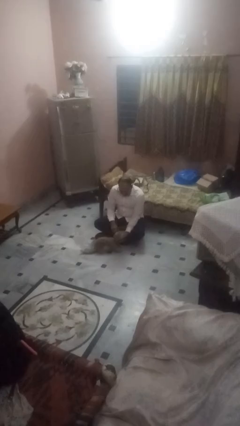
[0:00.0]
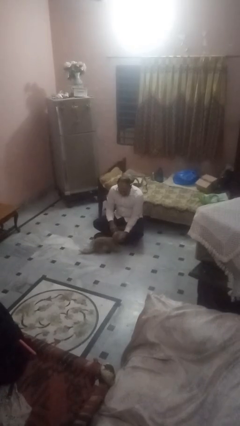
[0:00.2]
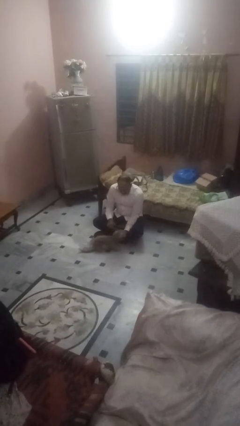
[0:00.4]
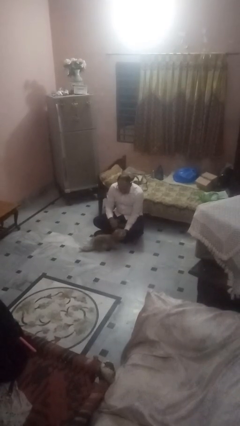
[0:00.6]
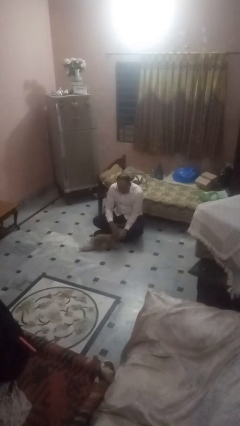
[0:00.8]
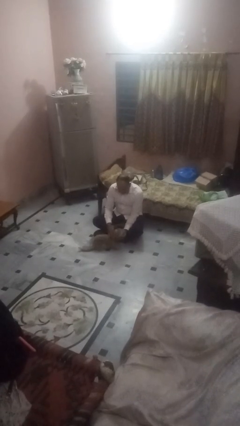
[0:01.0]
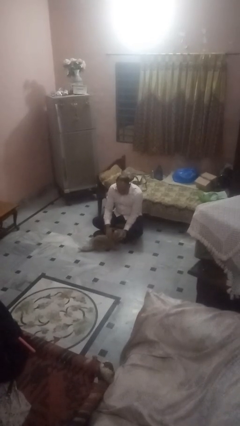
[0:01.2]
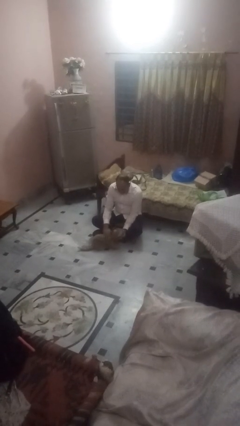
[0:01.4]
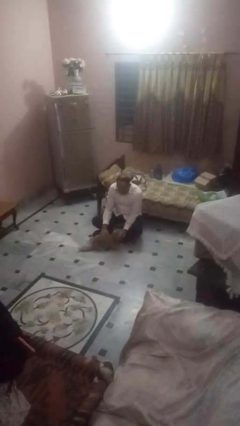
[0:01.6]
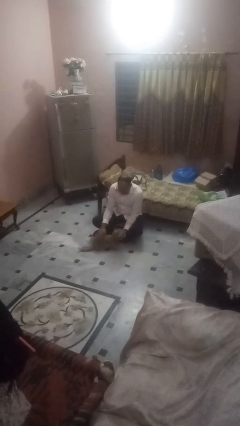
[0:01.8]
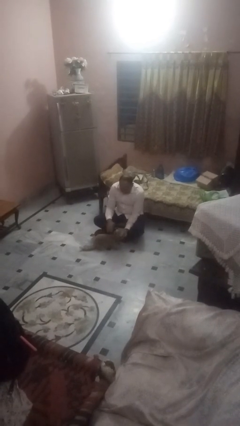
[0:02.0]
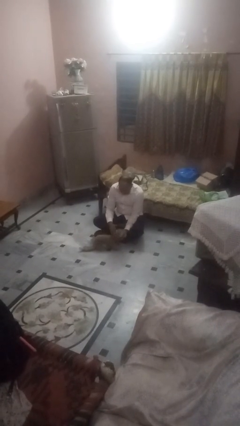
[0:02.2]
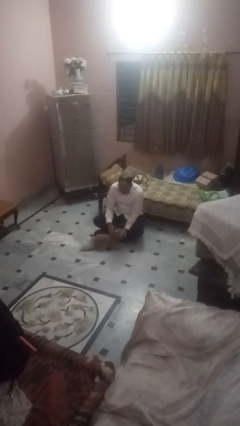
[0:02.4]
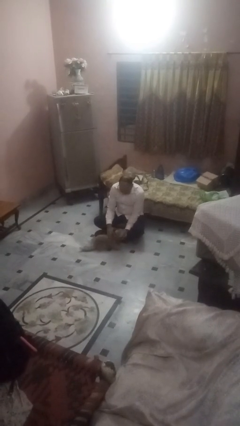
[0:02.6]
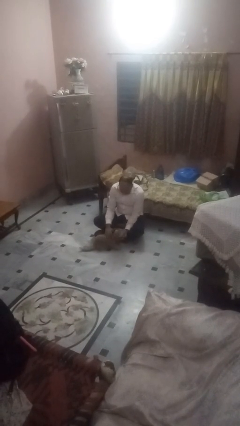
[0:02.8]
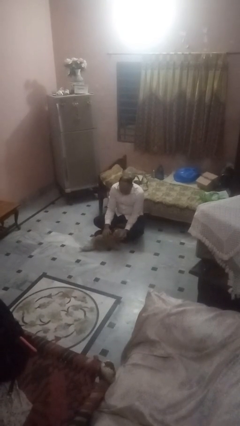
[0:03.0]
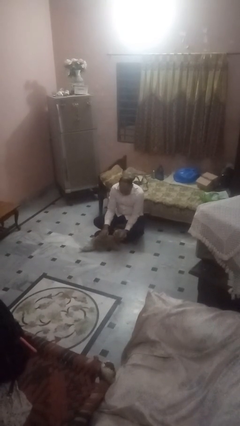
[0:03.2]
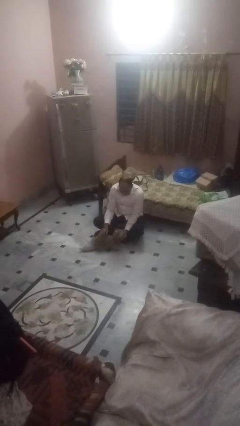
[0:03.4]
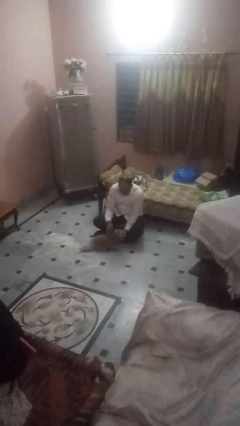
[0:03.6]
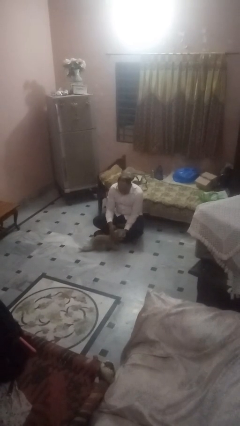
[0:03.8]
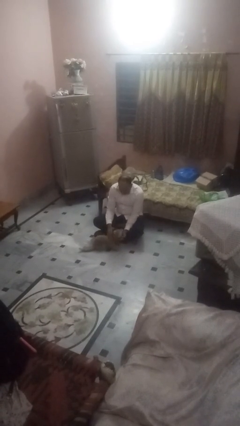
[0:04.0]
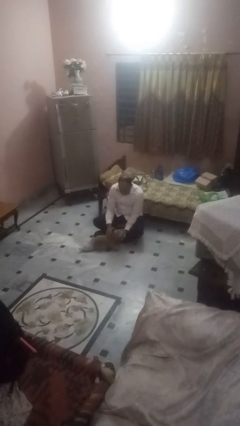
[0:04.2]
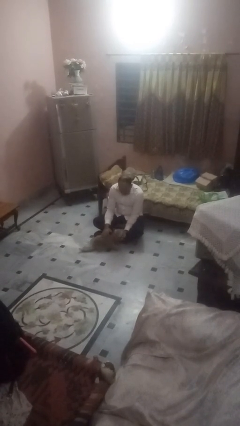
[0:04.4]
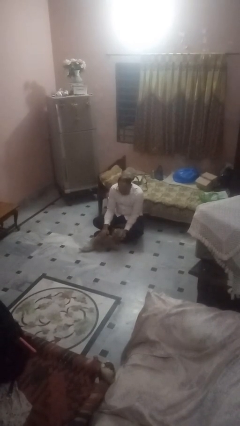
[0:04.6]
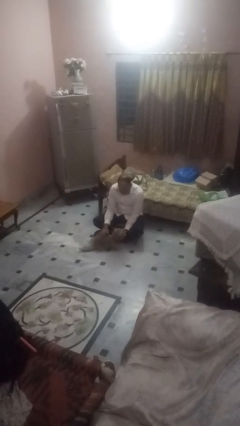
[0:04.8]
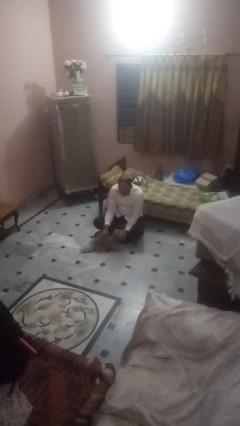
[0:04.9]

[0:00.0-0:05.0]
person pets dog

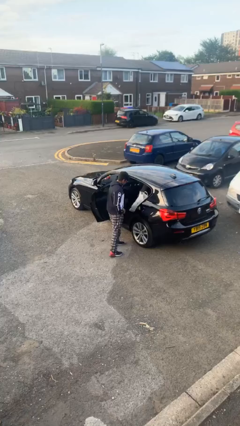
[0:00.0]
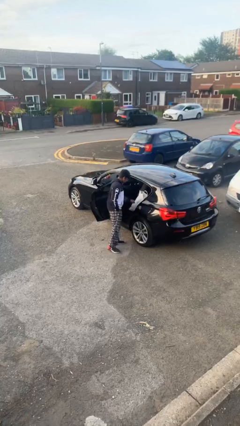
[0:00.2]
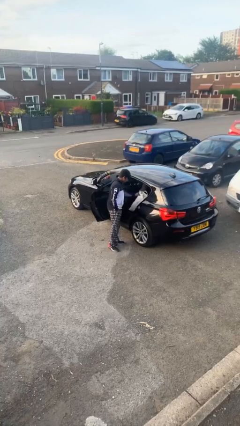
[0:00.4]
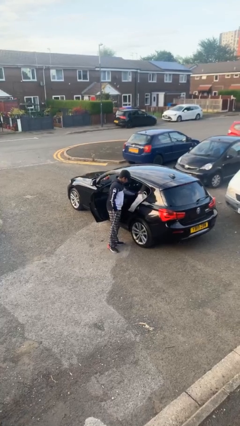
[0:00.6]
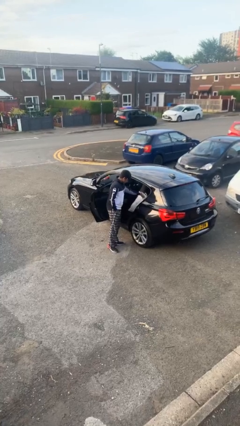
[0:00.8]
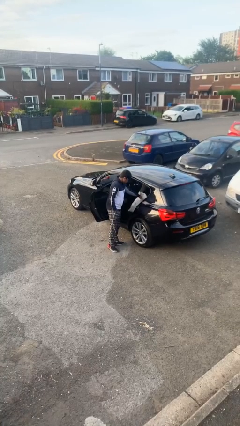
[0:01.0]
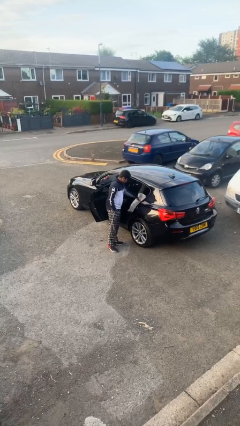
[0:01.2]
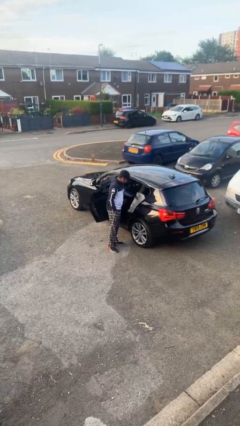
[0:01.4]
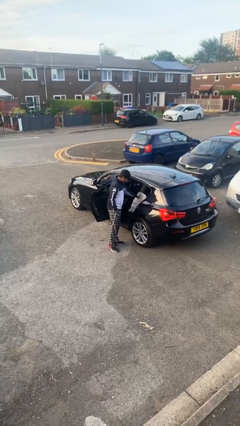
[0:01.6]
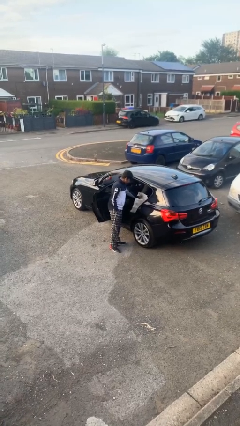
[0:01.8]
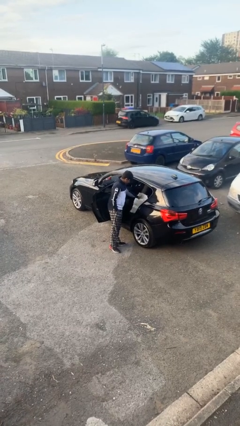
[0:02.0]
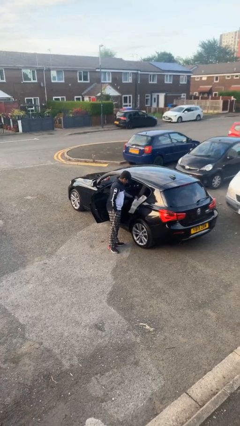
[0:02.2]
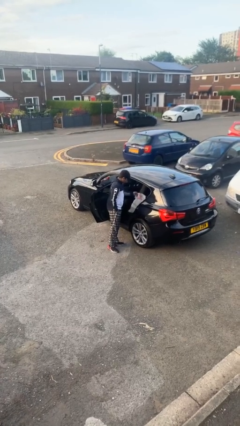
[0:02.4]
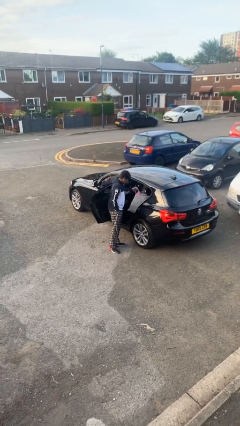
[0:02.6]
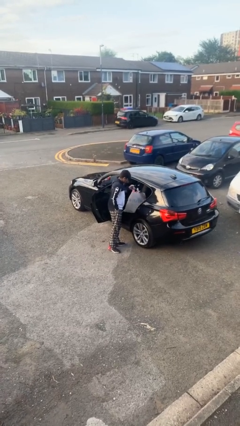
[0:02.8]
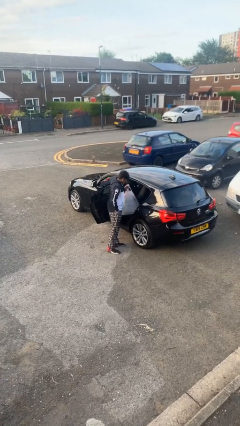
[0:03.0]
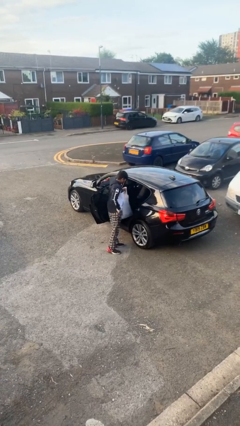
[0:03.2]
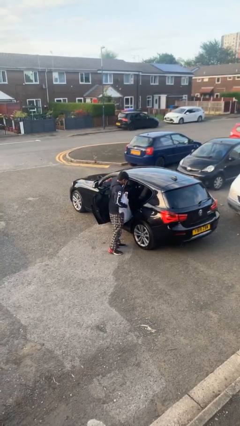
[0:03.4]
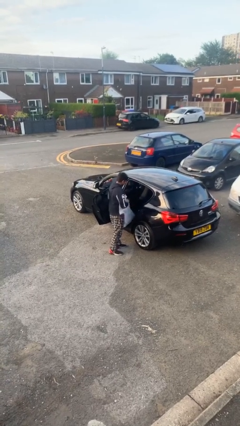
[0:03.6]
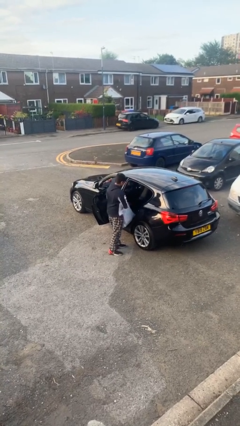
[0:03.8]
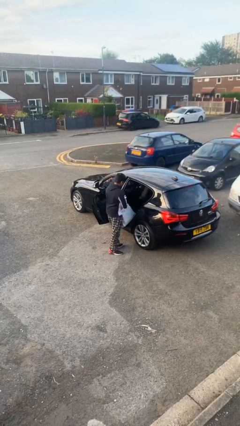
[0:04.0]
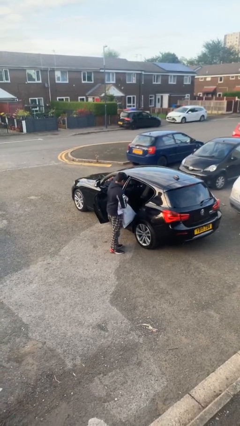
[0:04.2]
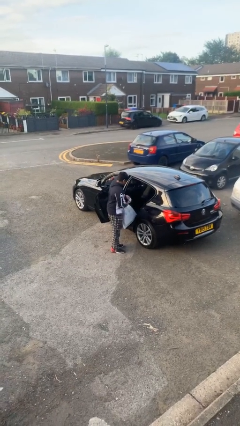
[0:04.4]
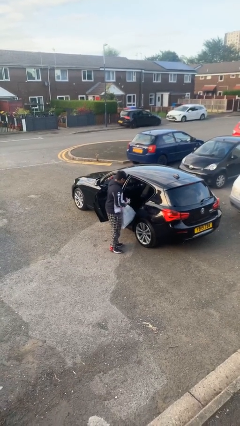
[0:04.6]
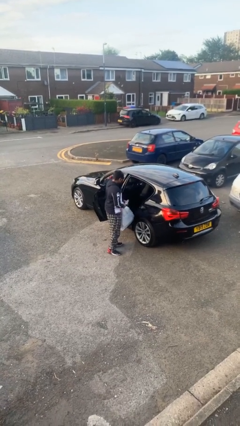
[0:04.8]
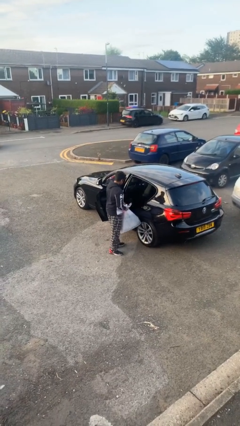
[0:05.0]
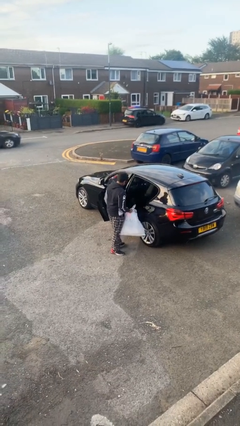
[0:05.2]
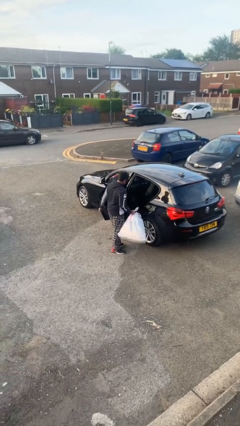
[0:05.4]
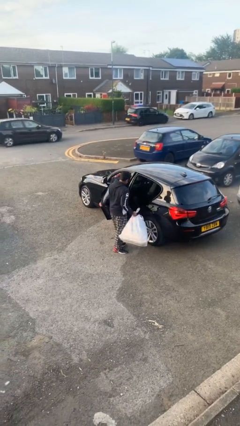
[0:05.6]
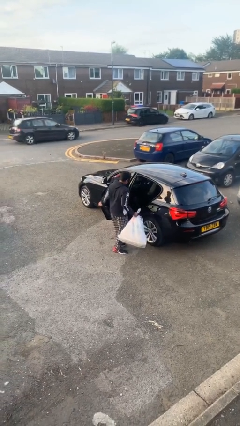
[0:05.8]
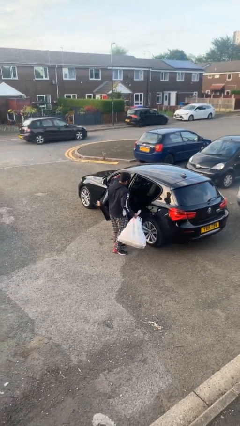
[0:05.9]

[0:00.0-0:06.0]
person unloads car

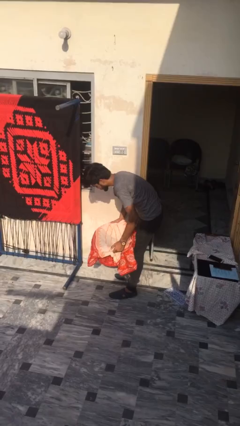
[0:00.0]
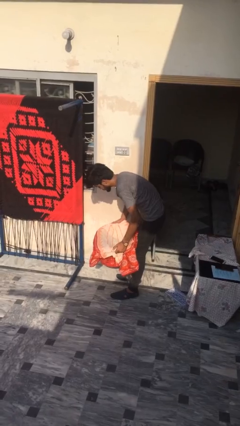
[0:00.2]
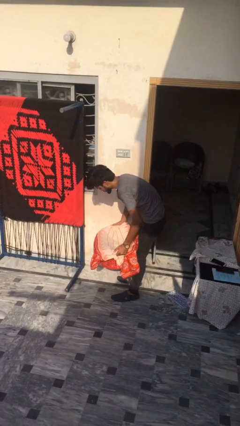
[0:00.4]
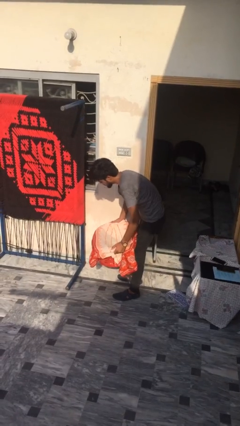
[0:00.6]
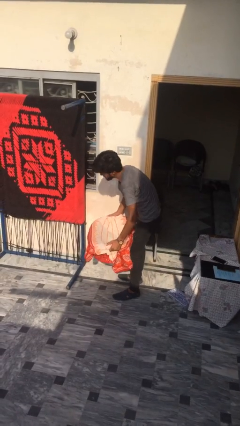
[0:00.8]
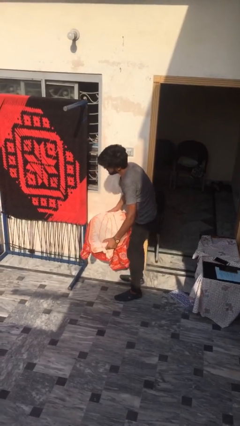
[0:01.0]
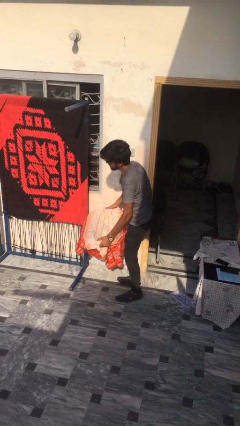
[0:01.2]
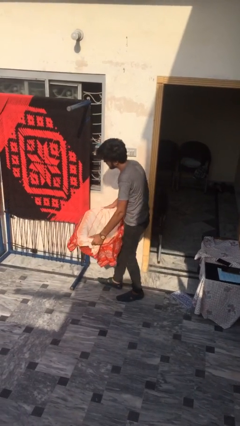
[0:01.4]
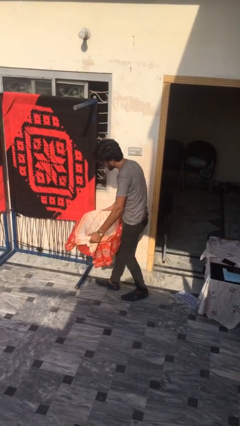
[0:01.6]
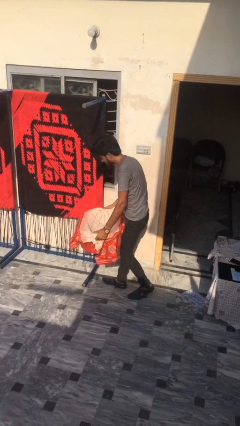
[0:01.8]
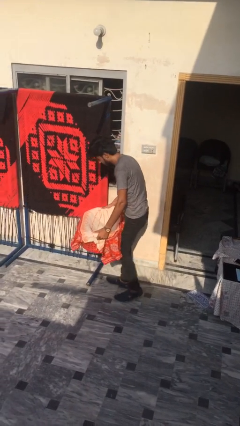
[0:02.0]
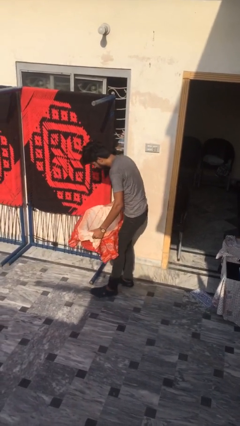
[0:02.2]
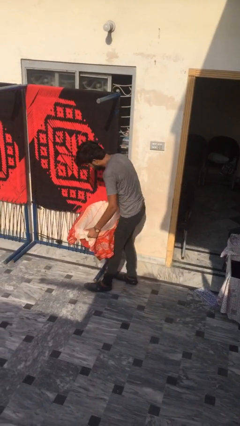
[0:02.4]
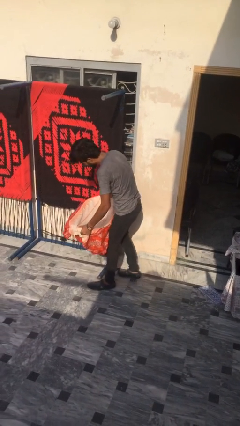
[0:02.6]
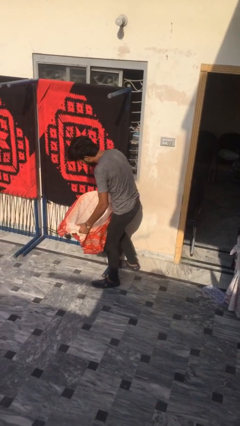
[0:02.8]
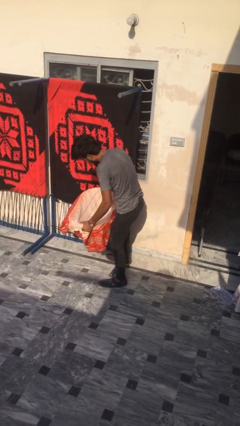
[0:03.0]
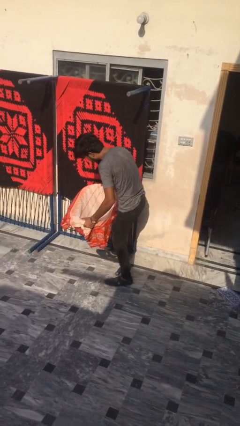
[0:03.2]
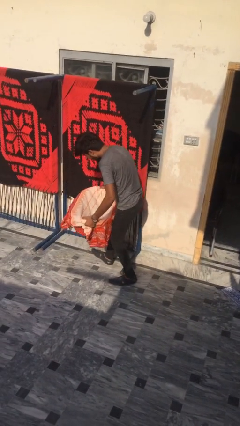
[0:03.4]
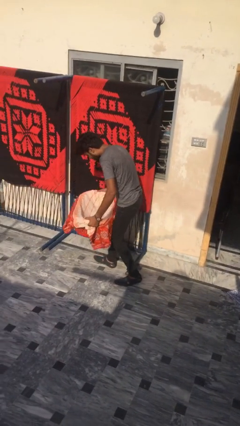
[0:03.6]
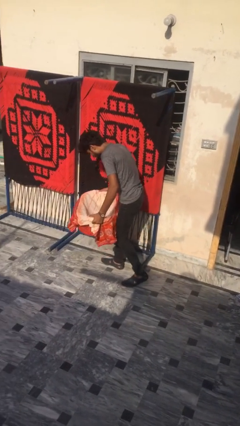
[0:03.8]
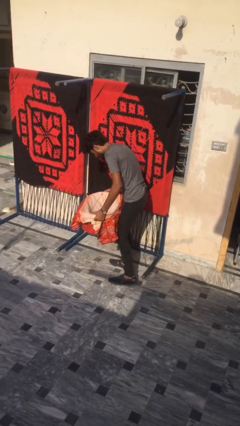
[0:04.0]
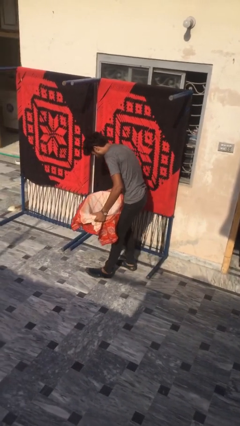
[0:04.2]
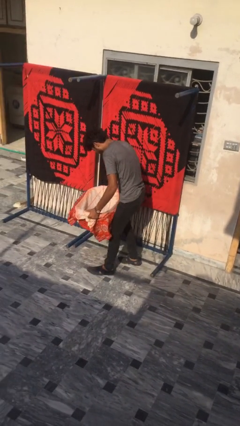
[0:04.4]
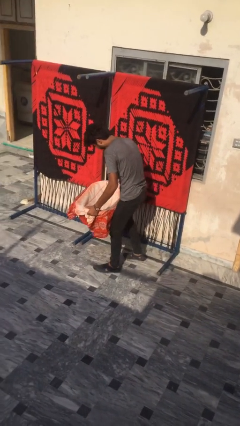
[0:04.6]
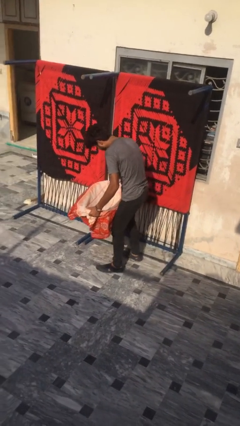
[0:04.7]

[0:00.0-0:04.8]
person carries heavy object

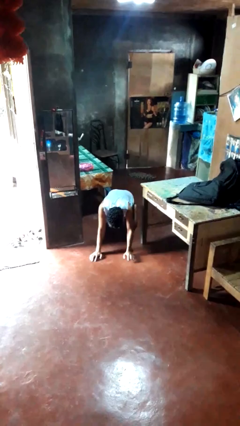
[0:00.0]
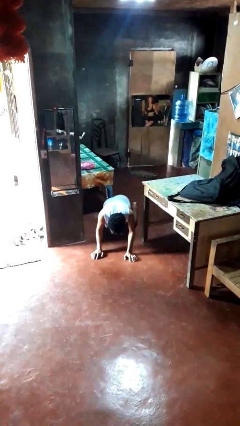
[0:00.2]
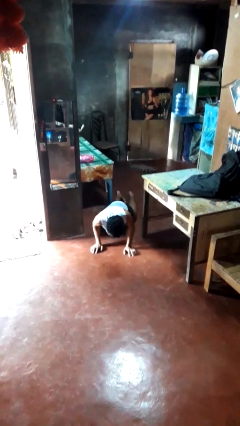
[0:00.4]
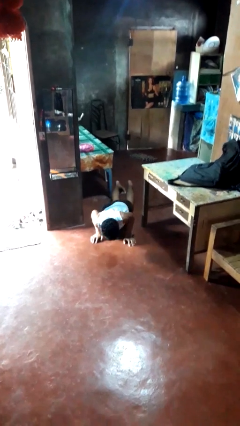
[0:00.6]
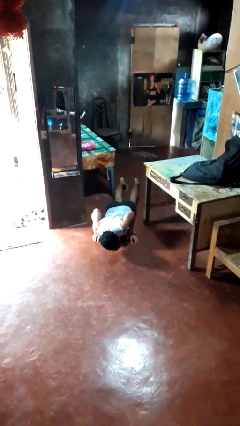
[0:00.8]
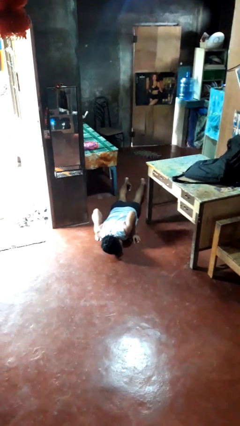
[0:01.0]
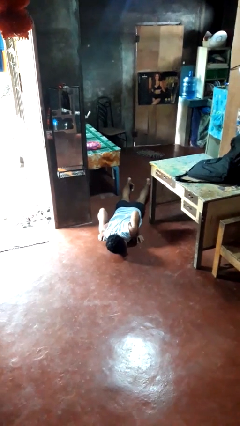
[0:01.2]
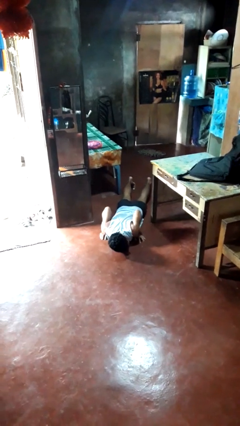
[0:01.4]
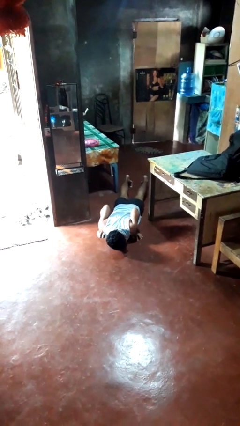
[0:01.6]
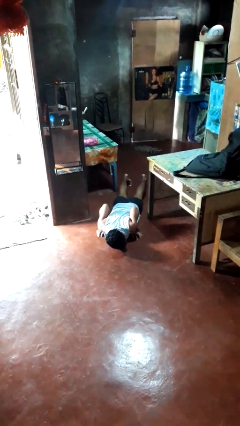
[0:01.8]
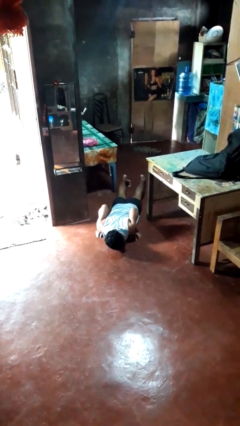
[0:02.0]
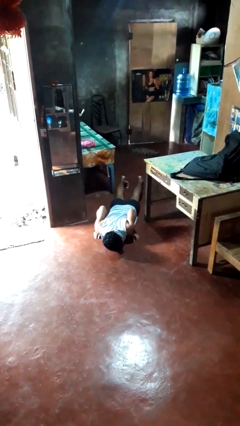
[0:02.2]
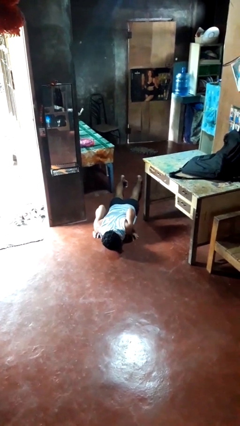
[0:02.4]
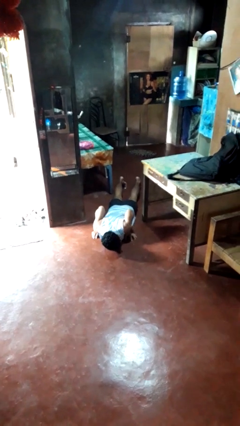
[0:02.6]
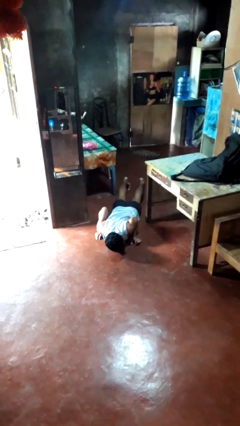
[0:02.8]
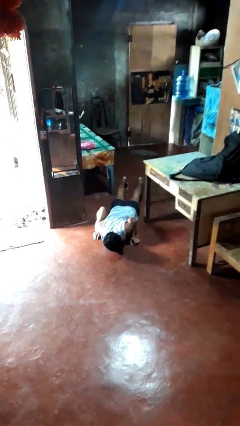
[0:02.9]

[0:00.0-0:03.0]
person lies down on floor
